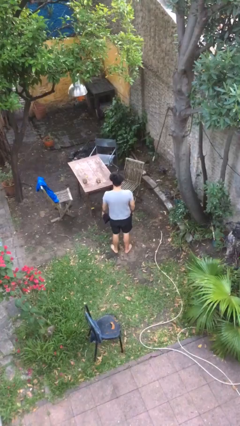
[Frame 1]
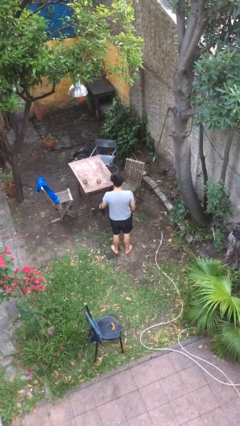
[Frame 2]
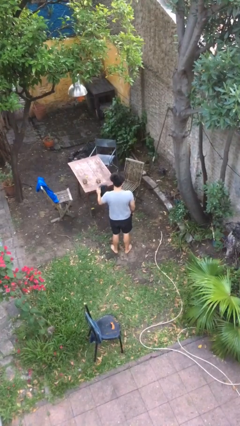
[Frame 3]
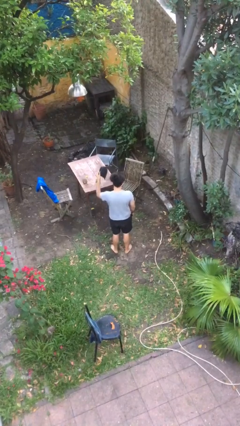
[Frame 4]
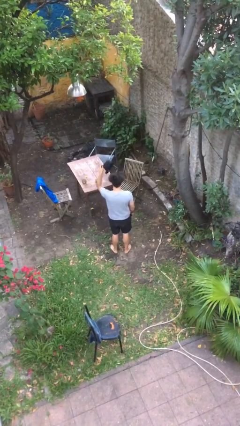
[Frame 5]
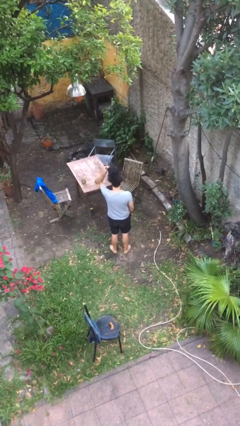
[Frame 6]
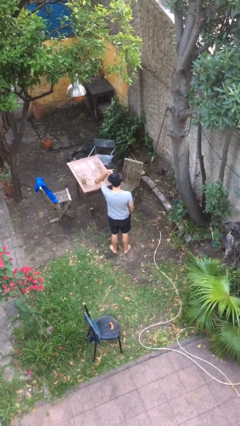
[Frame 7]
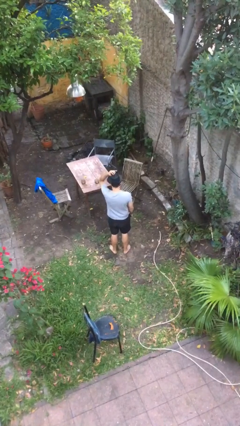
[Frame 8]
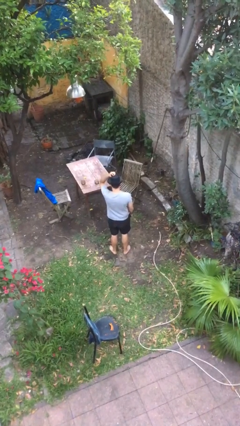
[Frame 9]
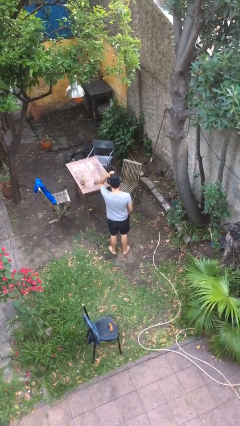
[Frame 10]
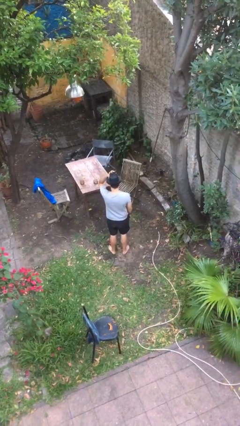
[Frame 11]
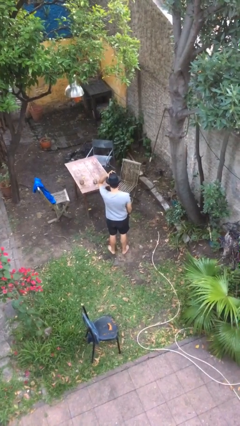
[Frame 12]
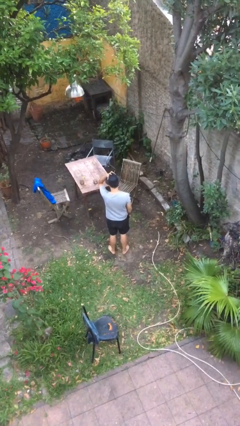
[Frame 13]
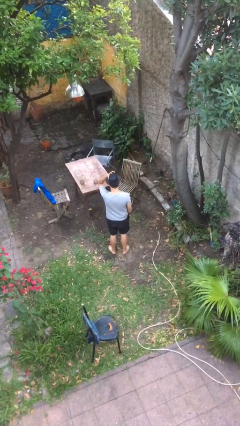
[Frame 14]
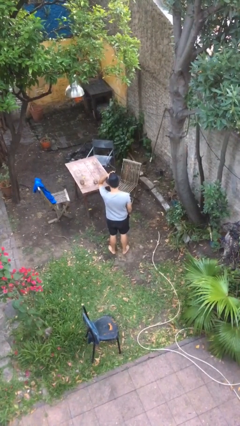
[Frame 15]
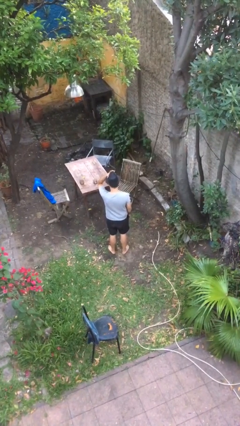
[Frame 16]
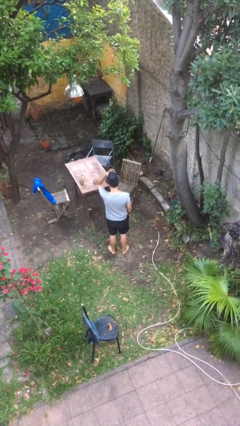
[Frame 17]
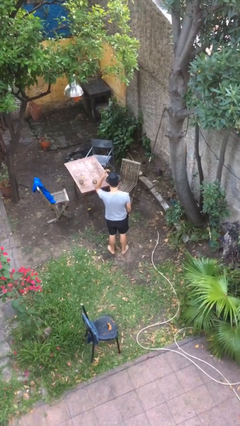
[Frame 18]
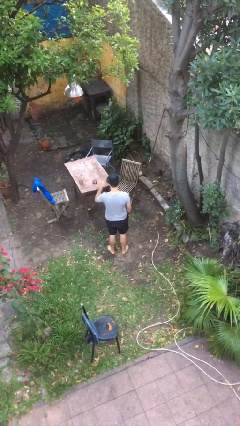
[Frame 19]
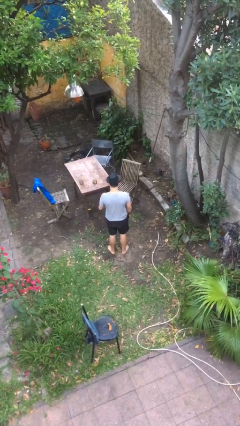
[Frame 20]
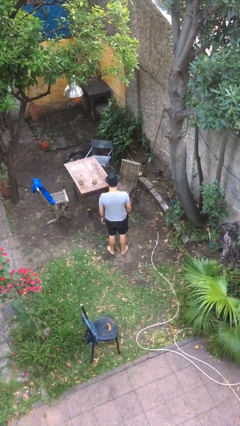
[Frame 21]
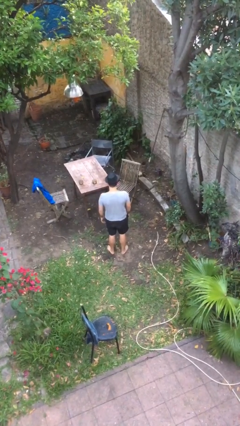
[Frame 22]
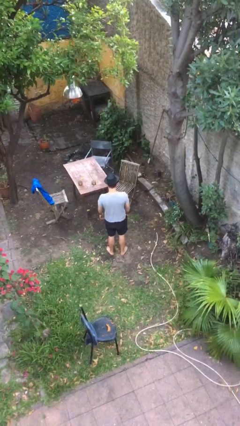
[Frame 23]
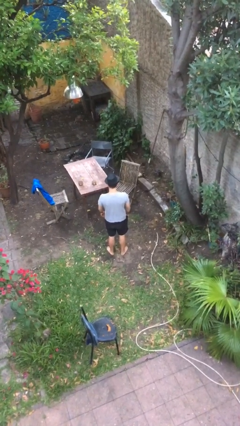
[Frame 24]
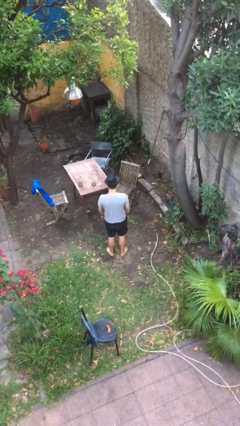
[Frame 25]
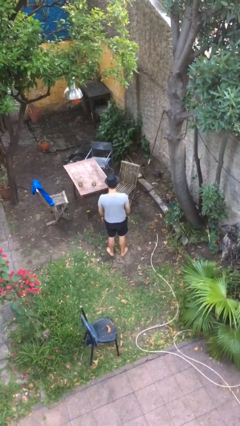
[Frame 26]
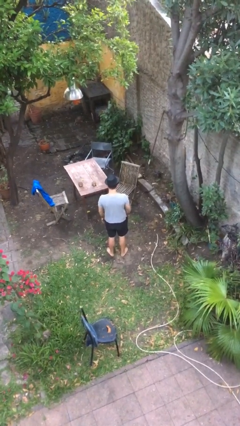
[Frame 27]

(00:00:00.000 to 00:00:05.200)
person puts on hat

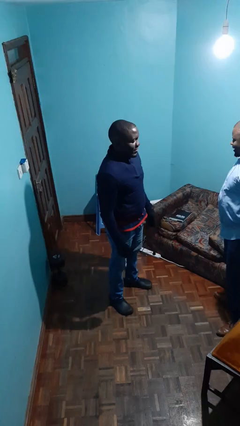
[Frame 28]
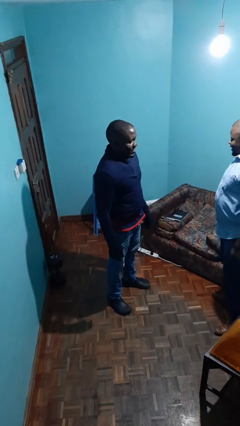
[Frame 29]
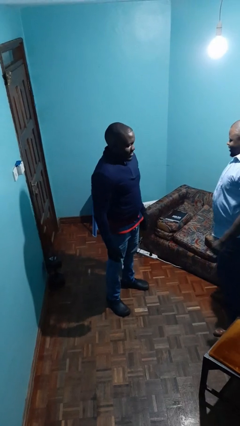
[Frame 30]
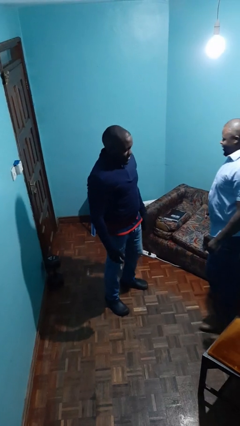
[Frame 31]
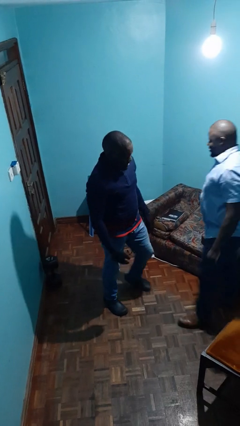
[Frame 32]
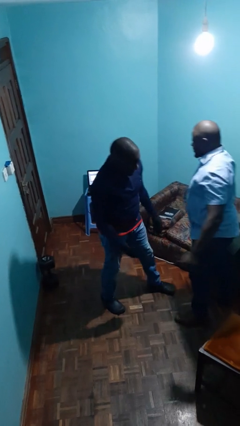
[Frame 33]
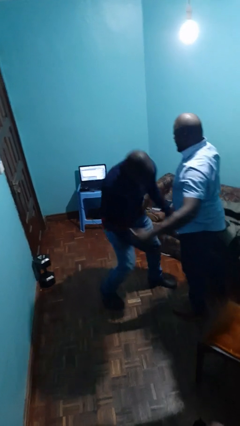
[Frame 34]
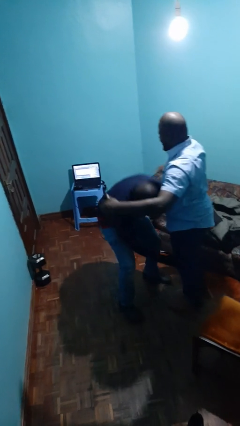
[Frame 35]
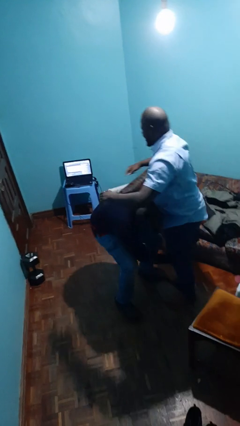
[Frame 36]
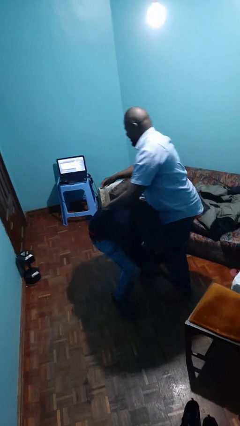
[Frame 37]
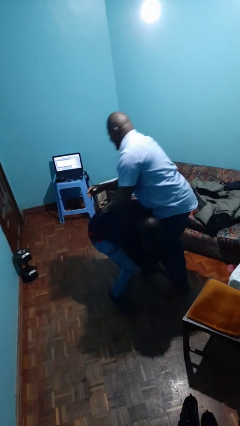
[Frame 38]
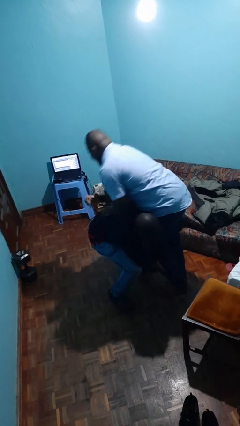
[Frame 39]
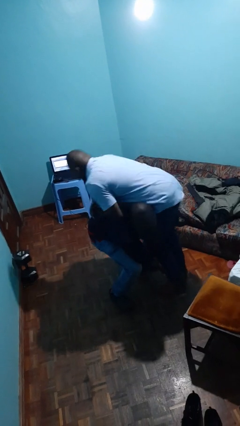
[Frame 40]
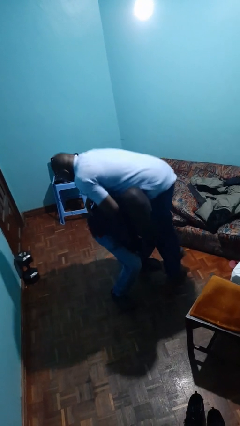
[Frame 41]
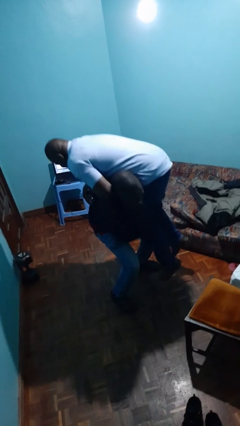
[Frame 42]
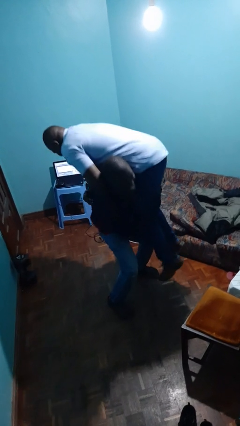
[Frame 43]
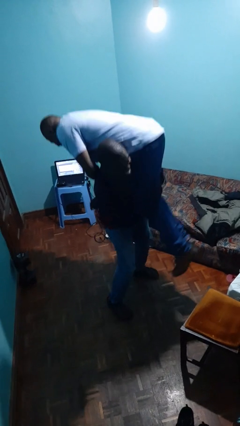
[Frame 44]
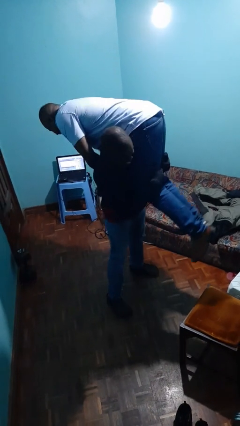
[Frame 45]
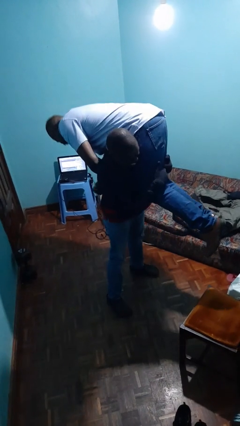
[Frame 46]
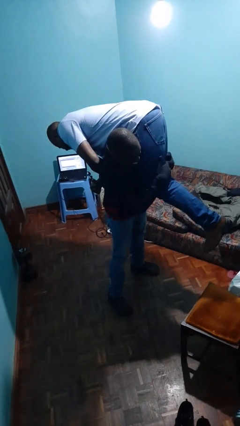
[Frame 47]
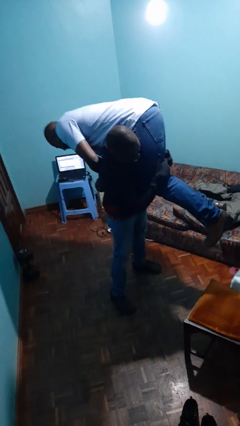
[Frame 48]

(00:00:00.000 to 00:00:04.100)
person carries person over shoulder

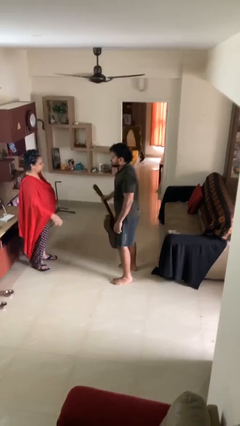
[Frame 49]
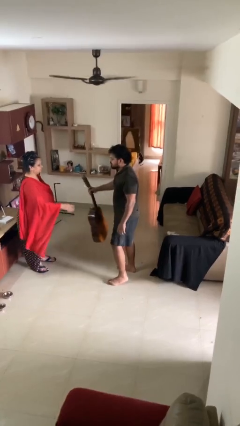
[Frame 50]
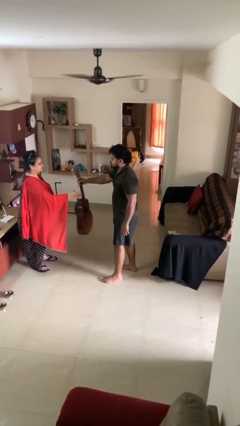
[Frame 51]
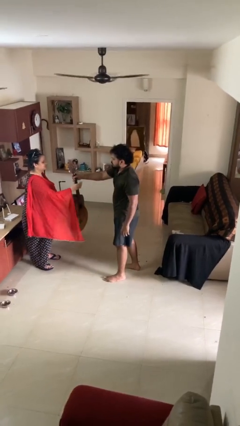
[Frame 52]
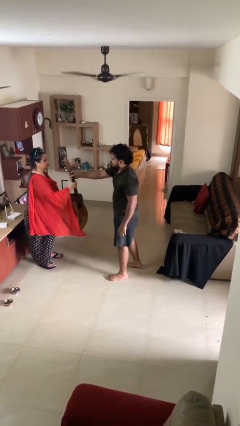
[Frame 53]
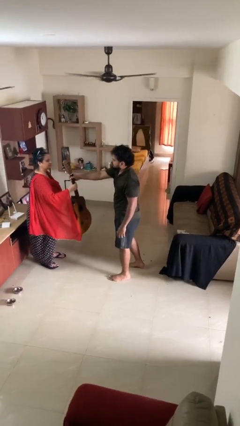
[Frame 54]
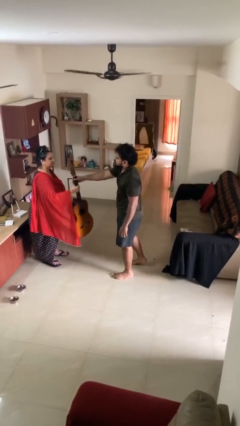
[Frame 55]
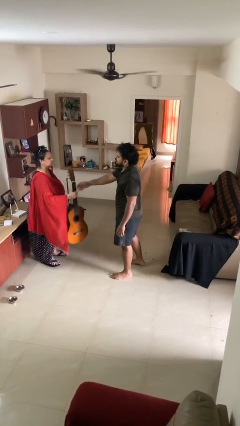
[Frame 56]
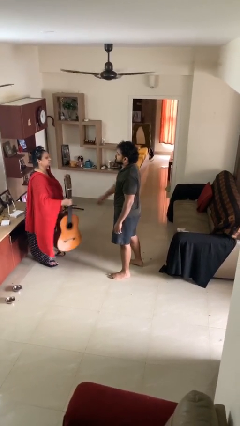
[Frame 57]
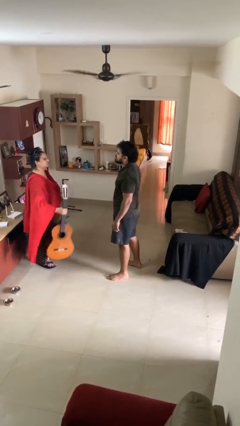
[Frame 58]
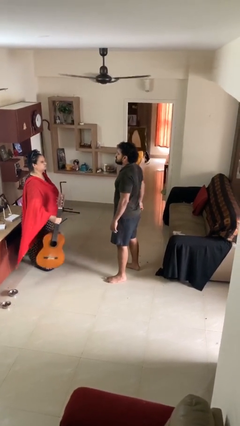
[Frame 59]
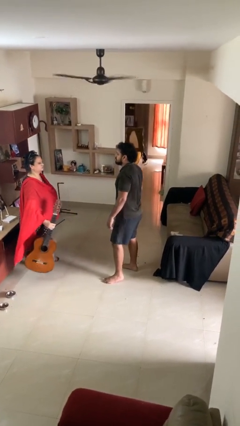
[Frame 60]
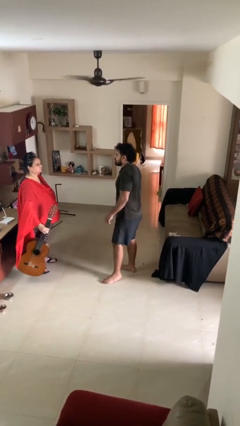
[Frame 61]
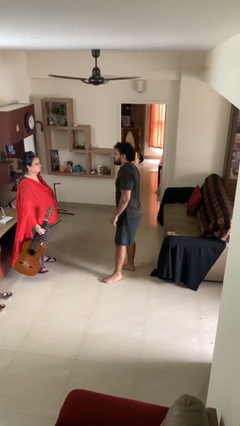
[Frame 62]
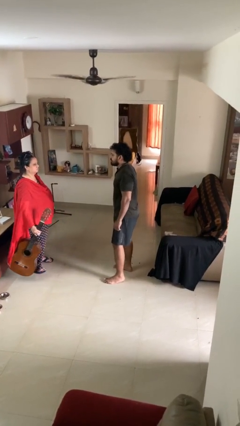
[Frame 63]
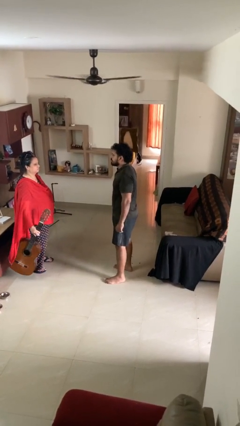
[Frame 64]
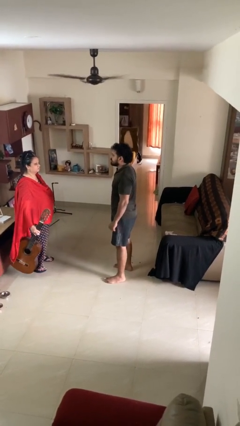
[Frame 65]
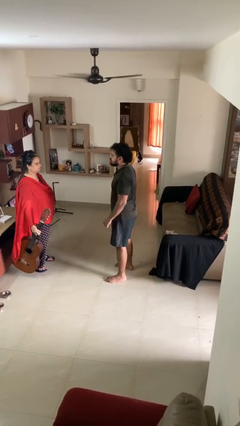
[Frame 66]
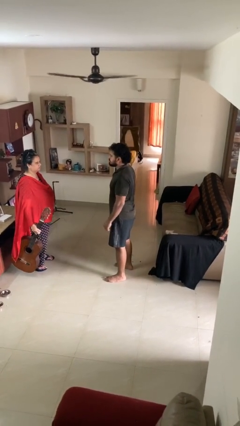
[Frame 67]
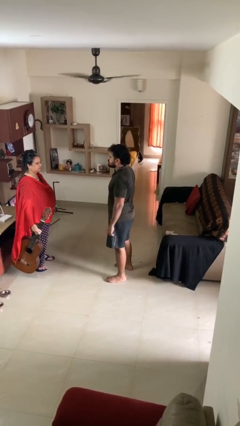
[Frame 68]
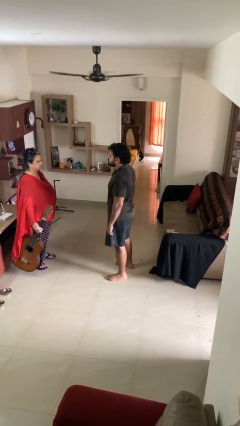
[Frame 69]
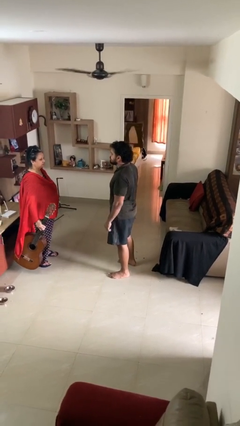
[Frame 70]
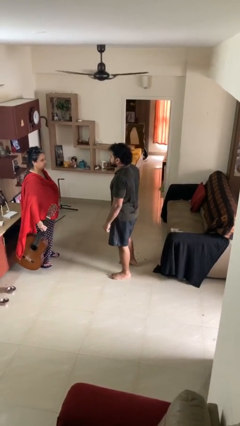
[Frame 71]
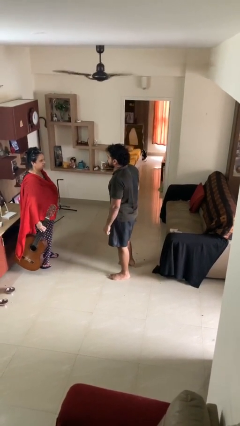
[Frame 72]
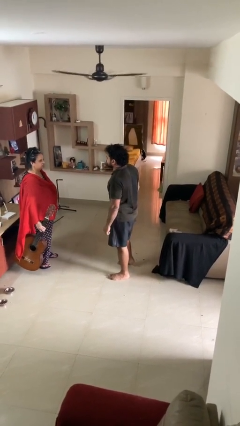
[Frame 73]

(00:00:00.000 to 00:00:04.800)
person transfers object to person

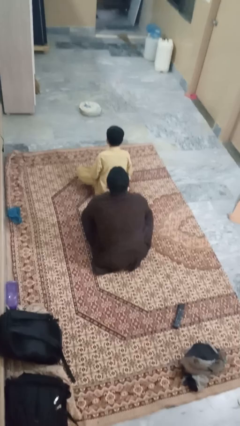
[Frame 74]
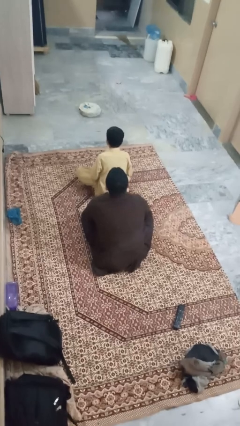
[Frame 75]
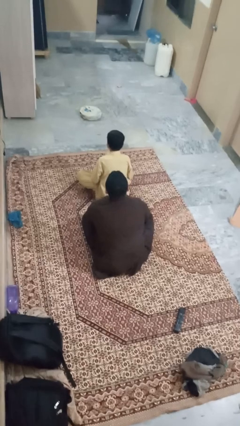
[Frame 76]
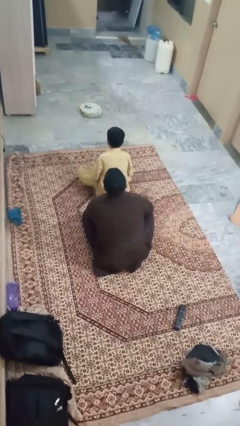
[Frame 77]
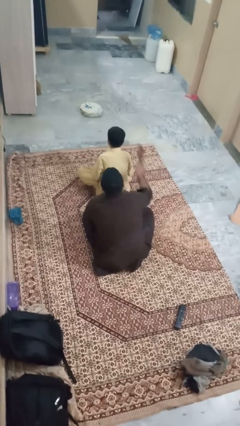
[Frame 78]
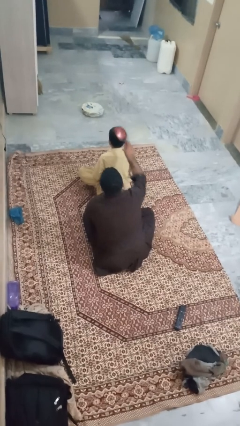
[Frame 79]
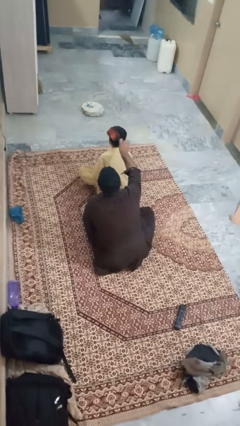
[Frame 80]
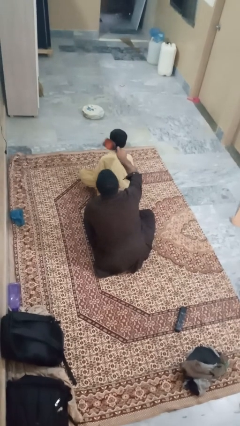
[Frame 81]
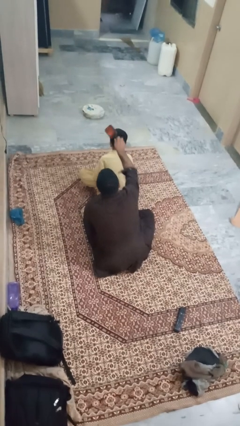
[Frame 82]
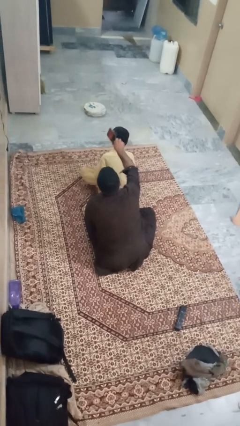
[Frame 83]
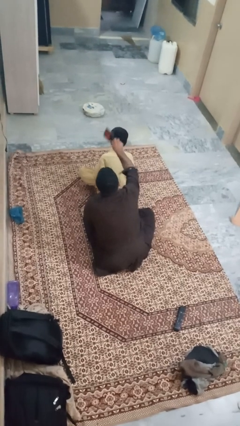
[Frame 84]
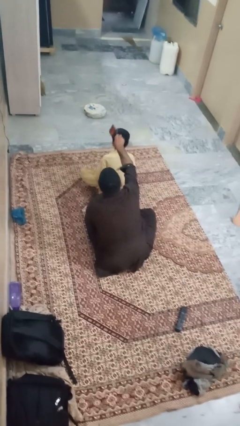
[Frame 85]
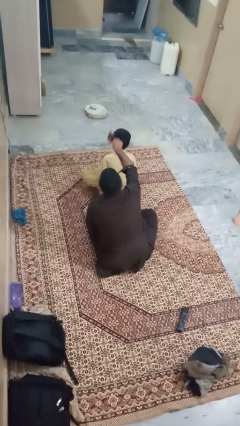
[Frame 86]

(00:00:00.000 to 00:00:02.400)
person brushes hair of person

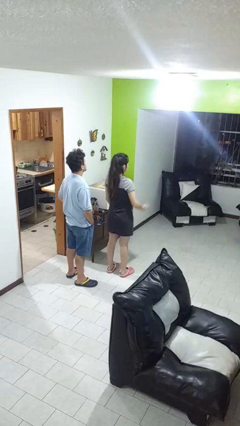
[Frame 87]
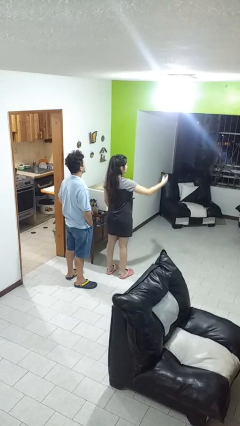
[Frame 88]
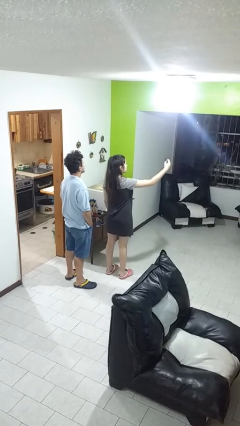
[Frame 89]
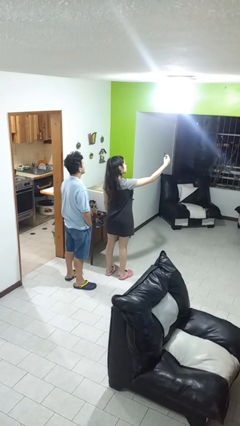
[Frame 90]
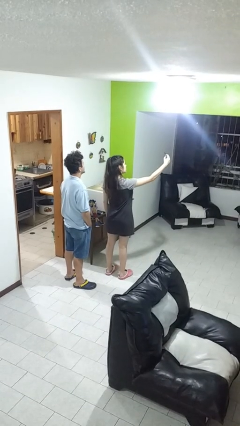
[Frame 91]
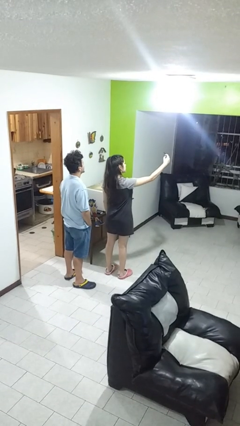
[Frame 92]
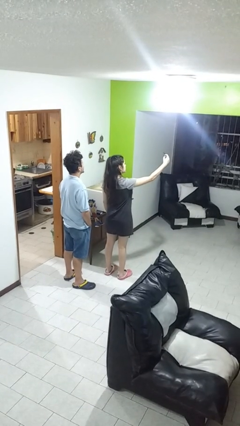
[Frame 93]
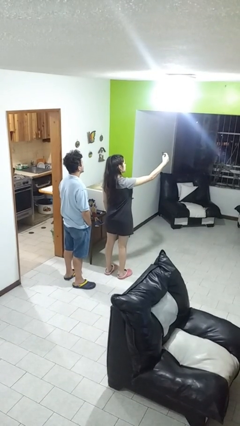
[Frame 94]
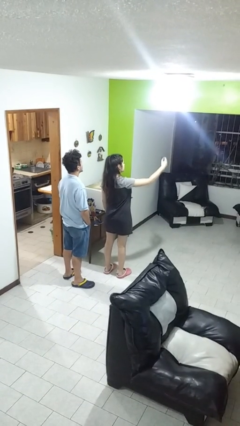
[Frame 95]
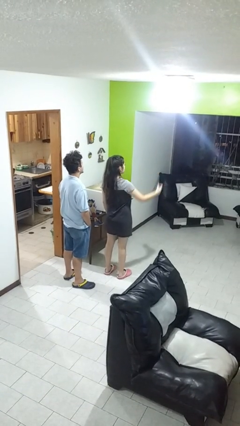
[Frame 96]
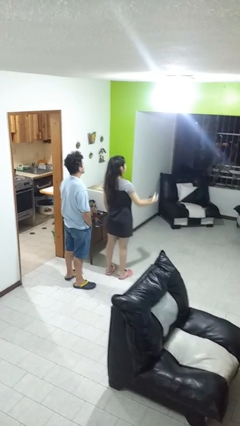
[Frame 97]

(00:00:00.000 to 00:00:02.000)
person takes selfie with person
